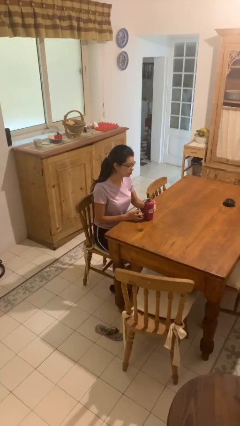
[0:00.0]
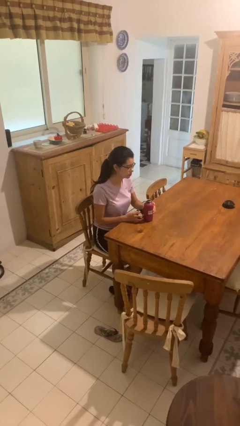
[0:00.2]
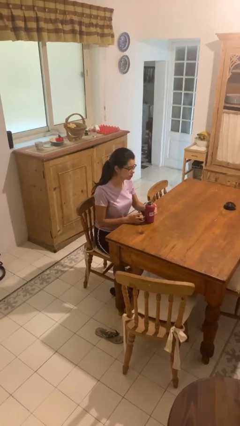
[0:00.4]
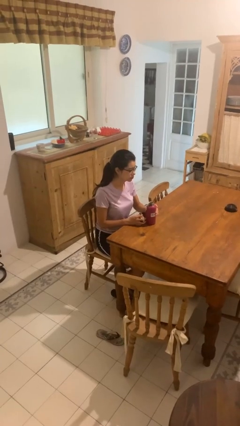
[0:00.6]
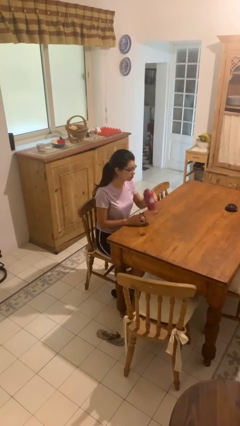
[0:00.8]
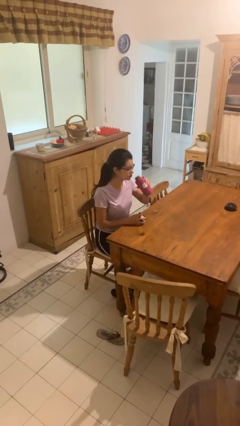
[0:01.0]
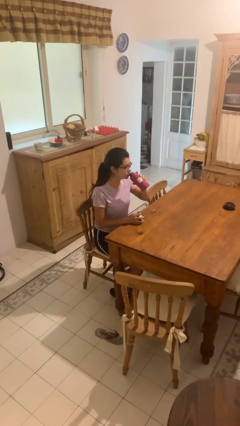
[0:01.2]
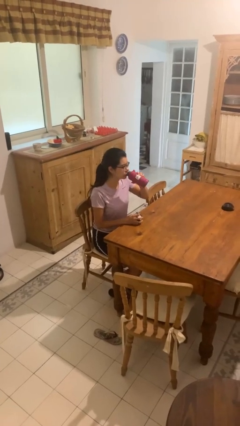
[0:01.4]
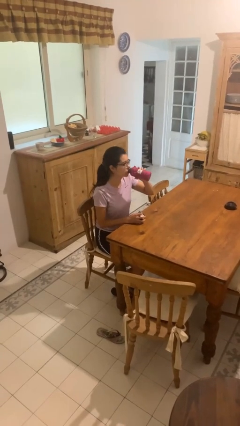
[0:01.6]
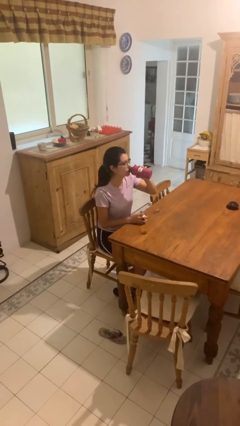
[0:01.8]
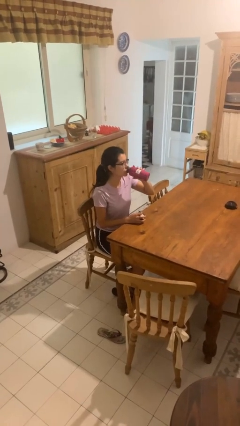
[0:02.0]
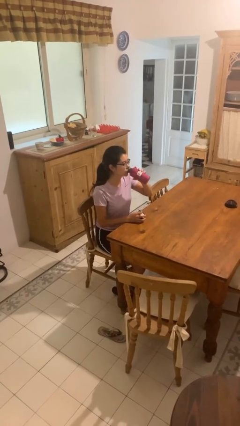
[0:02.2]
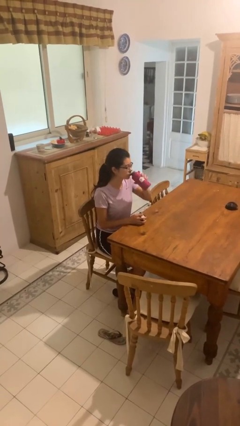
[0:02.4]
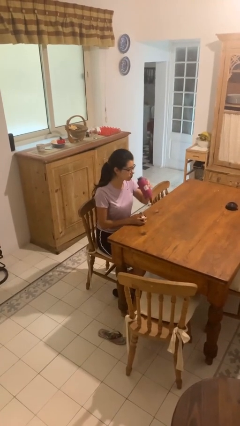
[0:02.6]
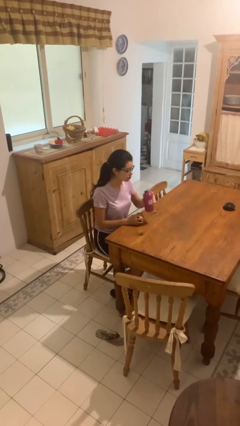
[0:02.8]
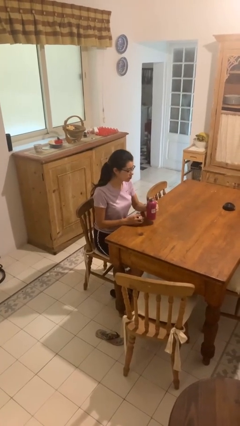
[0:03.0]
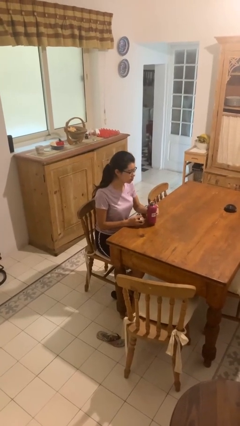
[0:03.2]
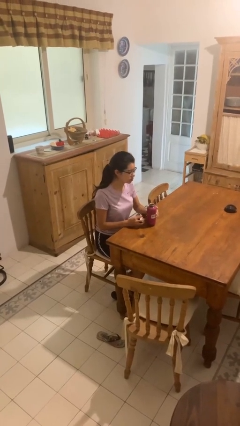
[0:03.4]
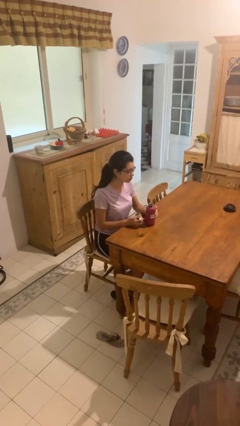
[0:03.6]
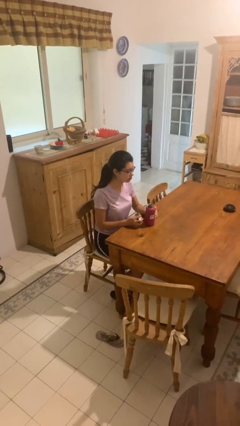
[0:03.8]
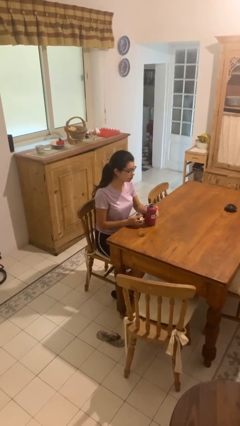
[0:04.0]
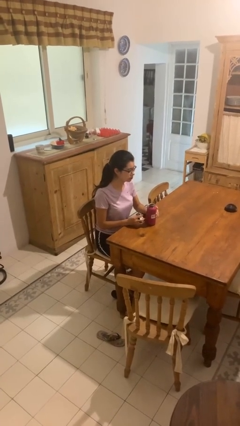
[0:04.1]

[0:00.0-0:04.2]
person drinks from bottle

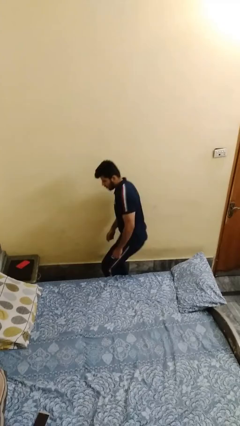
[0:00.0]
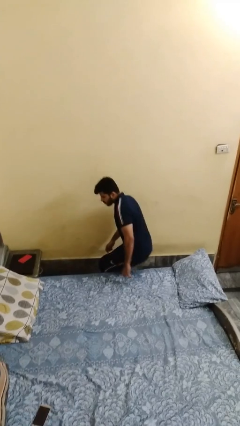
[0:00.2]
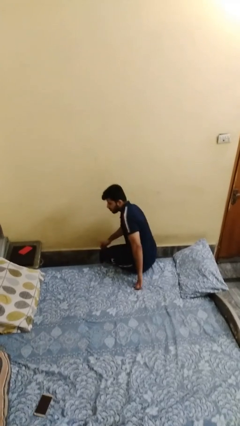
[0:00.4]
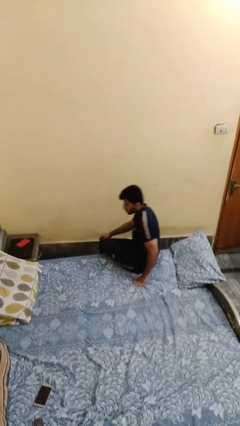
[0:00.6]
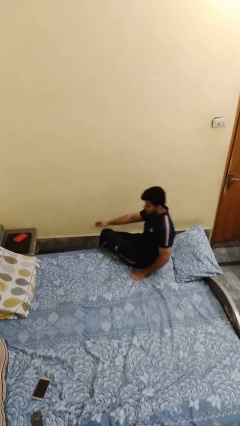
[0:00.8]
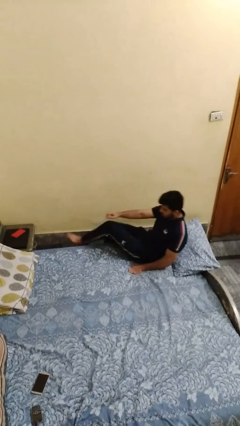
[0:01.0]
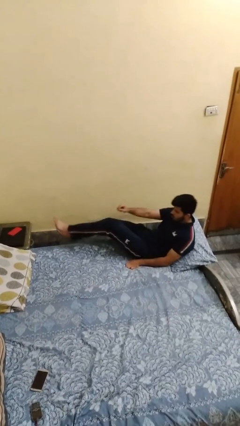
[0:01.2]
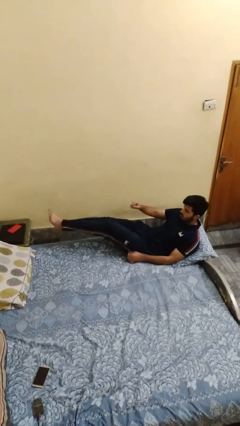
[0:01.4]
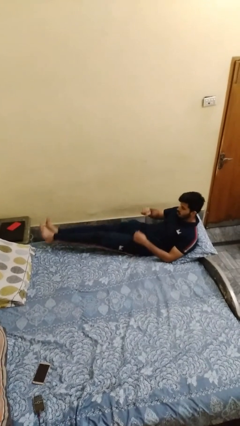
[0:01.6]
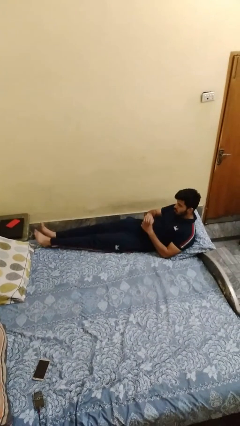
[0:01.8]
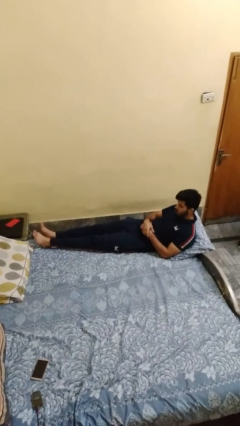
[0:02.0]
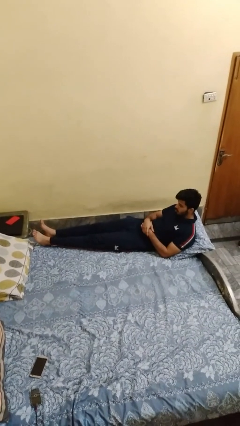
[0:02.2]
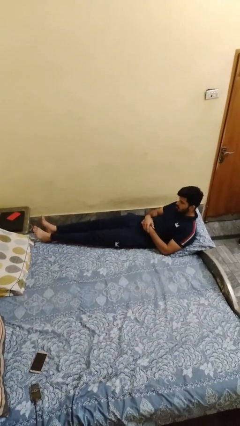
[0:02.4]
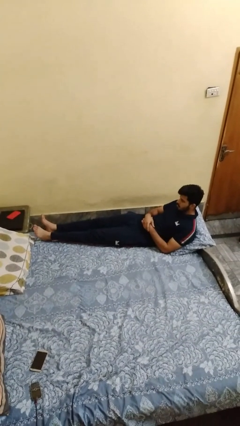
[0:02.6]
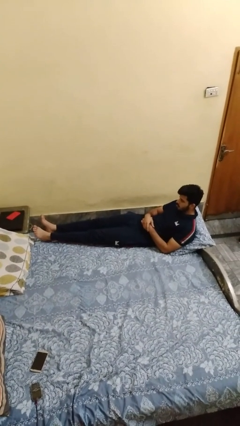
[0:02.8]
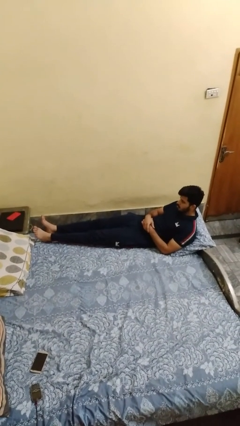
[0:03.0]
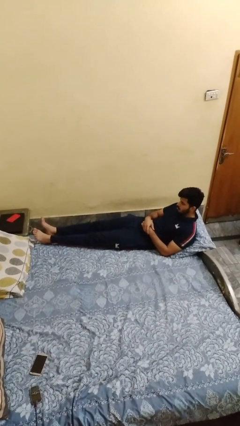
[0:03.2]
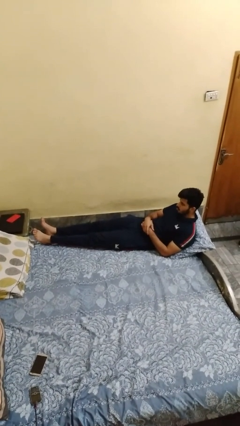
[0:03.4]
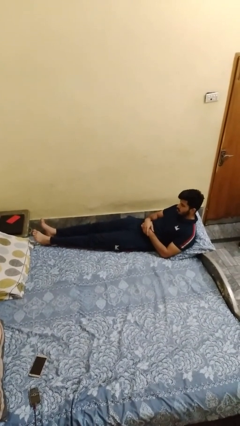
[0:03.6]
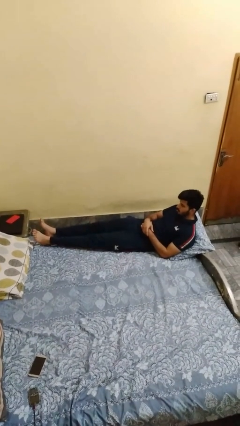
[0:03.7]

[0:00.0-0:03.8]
person lies down on bed

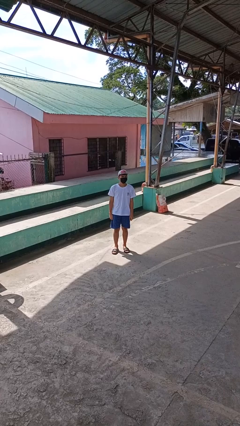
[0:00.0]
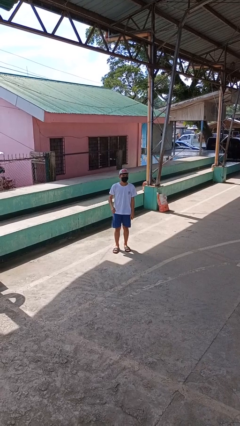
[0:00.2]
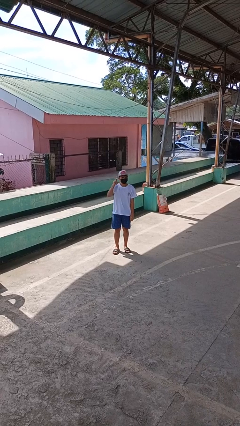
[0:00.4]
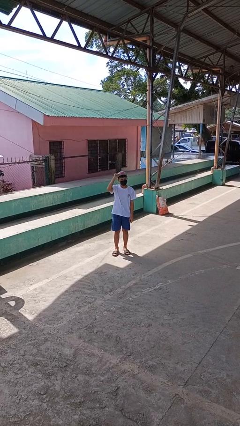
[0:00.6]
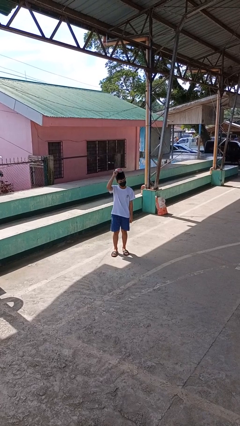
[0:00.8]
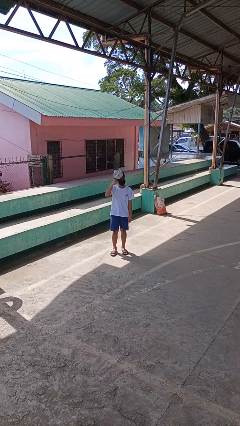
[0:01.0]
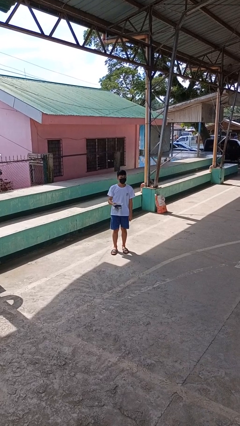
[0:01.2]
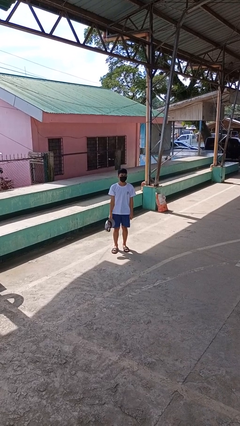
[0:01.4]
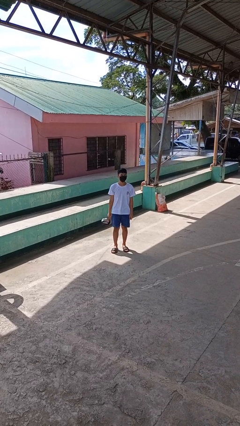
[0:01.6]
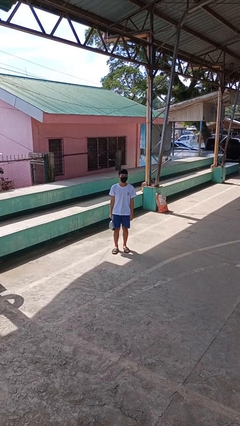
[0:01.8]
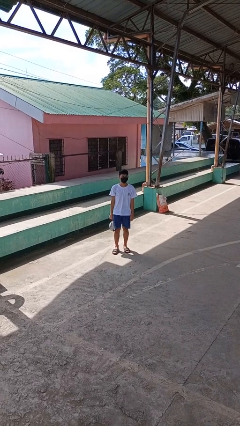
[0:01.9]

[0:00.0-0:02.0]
person takes off hat

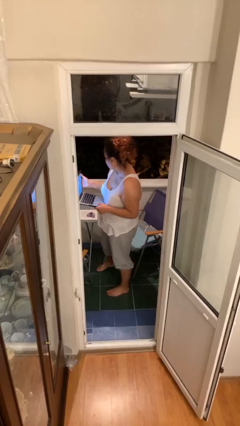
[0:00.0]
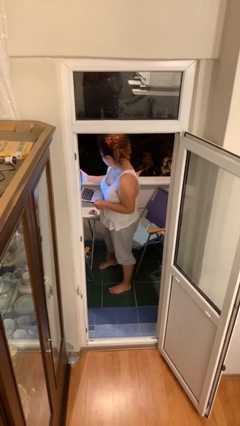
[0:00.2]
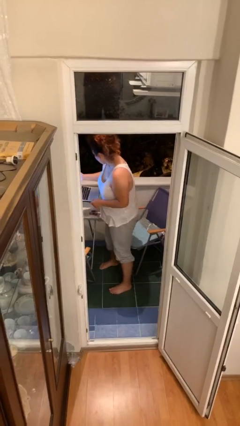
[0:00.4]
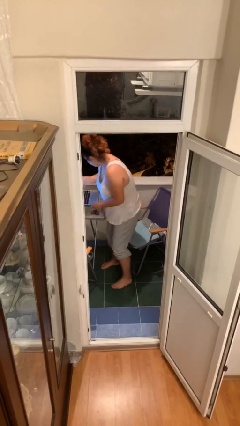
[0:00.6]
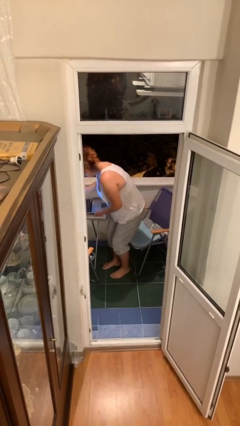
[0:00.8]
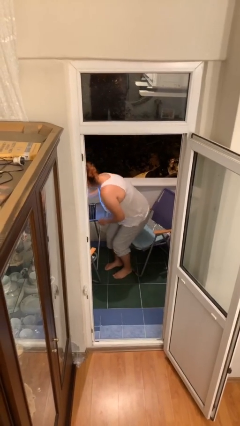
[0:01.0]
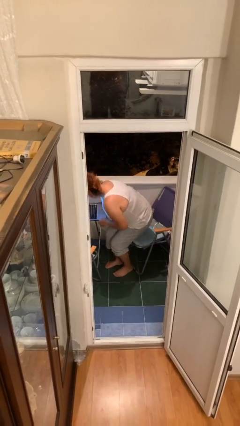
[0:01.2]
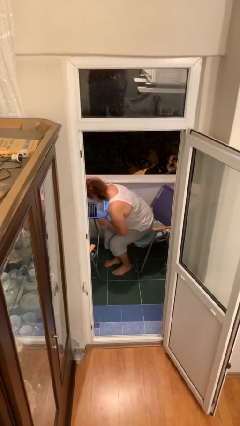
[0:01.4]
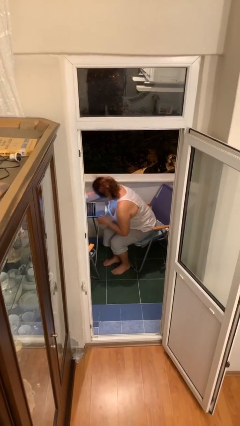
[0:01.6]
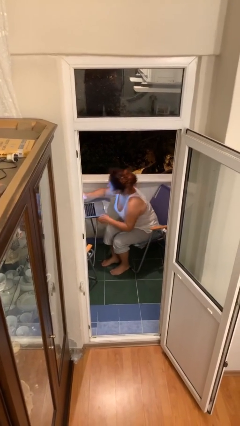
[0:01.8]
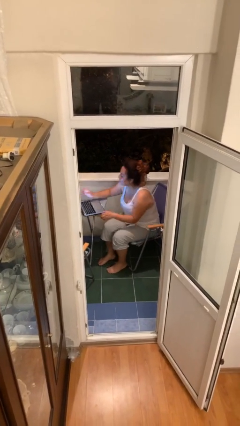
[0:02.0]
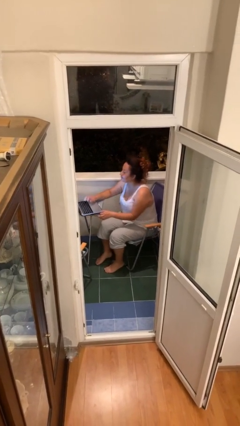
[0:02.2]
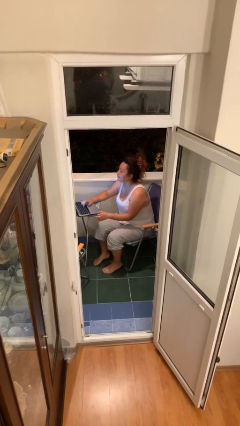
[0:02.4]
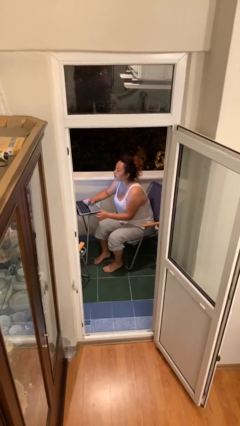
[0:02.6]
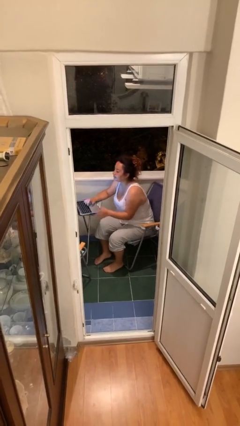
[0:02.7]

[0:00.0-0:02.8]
person sits down

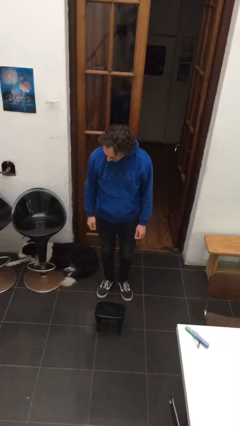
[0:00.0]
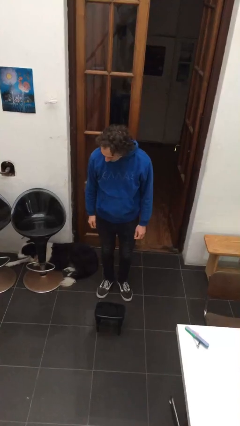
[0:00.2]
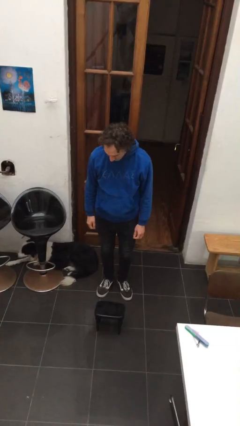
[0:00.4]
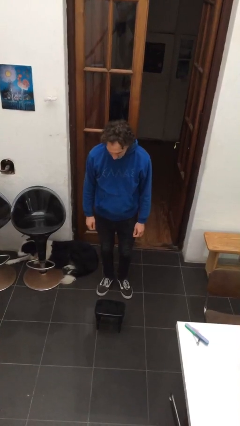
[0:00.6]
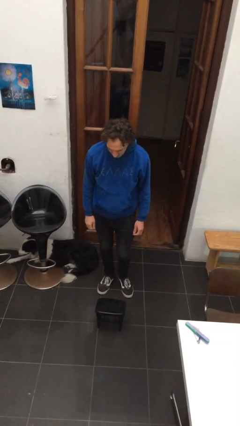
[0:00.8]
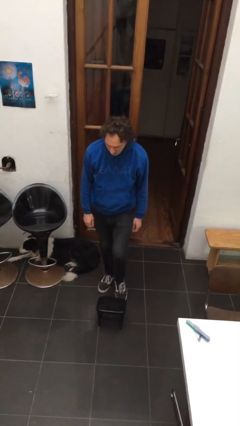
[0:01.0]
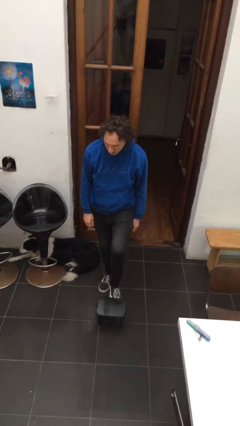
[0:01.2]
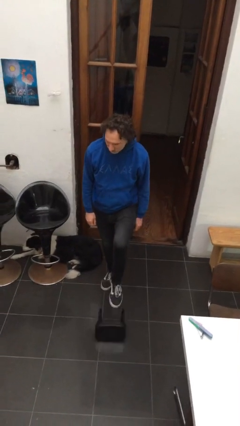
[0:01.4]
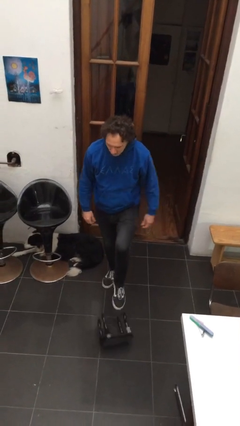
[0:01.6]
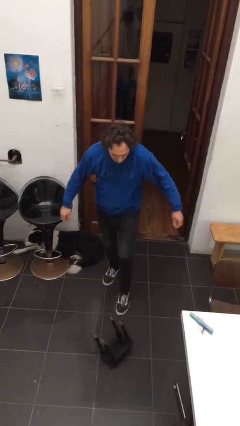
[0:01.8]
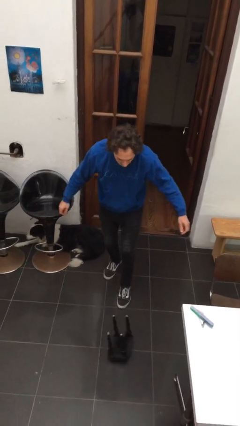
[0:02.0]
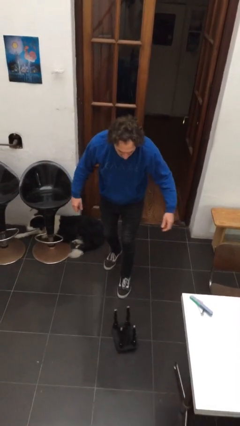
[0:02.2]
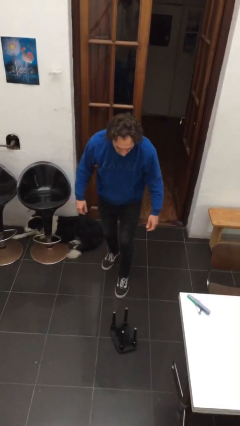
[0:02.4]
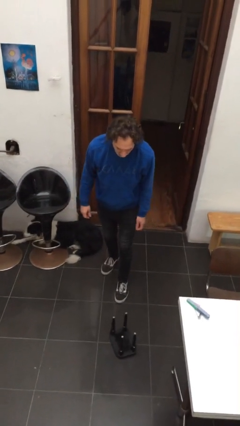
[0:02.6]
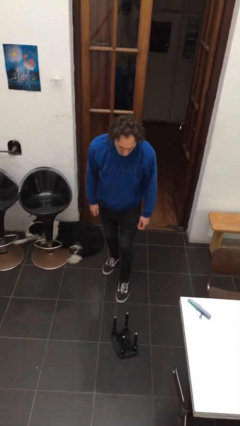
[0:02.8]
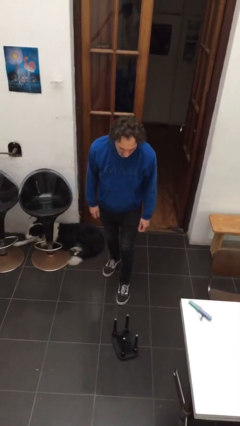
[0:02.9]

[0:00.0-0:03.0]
person knocks over furniture

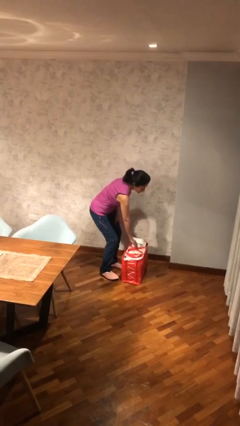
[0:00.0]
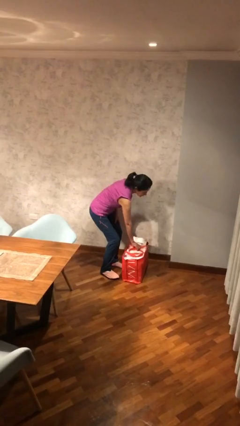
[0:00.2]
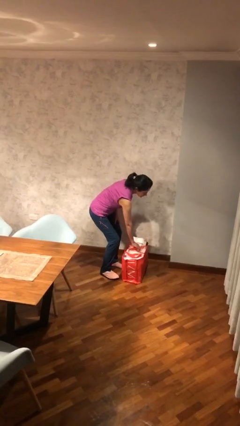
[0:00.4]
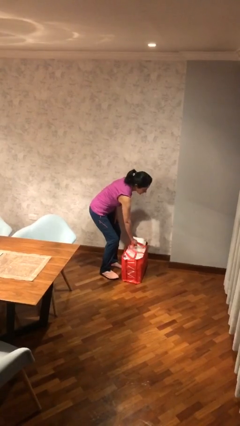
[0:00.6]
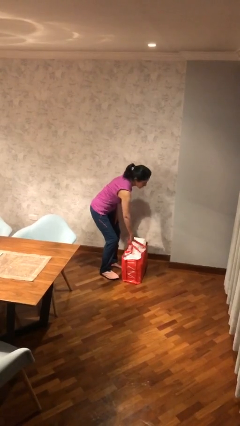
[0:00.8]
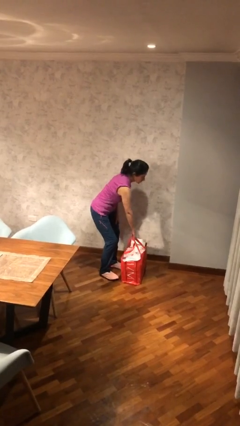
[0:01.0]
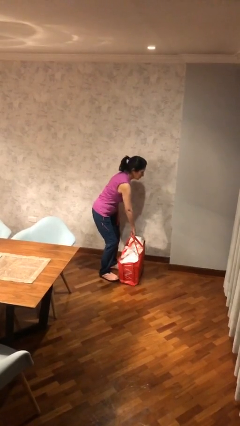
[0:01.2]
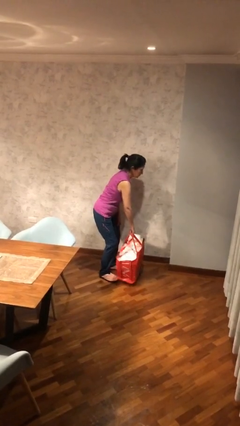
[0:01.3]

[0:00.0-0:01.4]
person picks up object from floor
